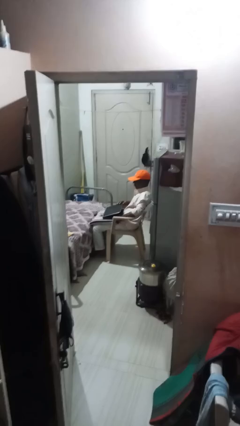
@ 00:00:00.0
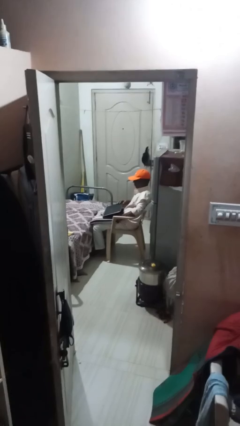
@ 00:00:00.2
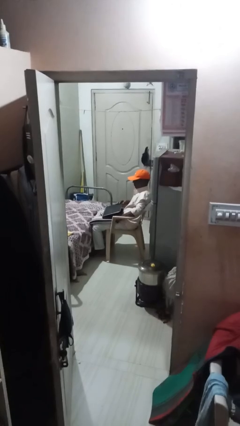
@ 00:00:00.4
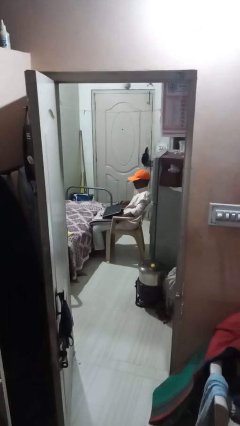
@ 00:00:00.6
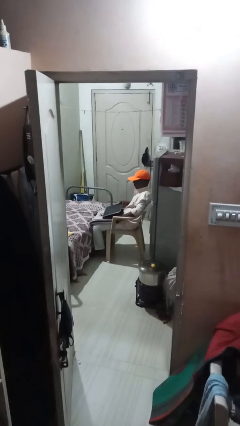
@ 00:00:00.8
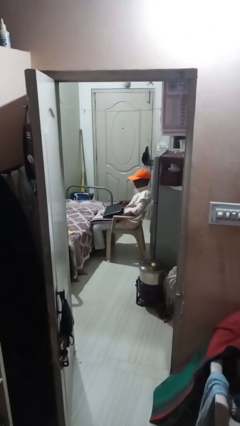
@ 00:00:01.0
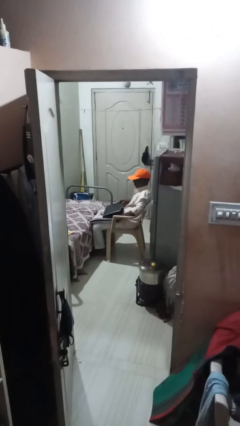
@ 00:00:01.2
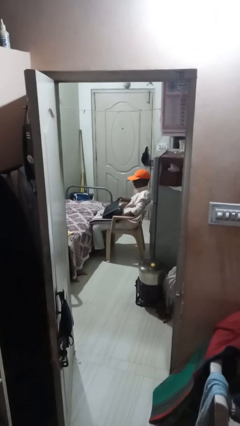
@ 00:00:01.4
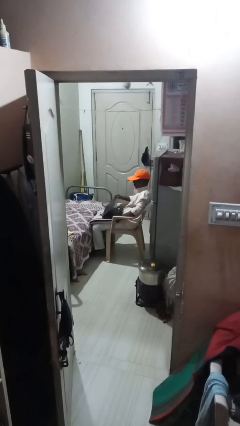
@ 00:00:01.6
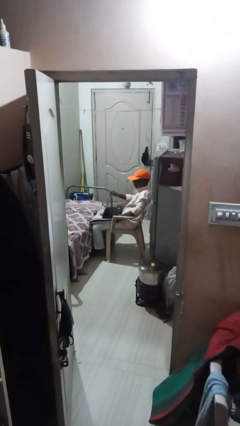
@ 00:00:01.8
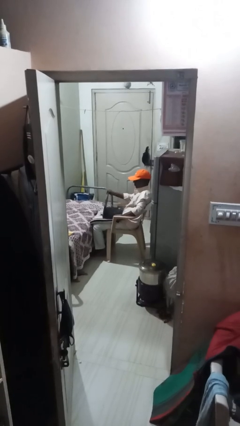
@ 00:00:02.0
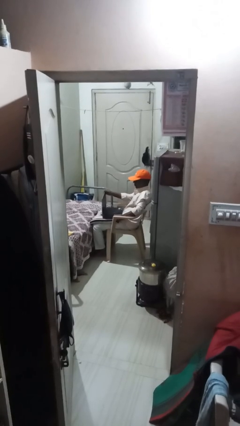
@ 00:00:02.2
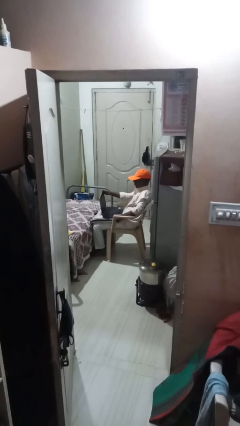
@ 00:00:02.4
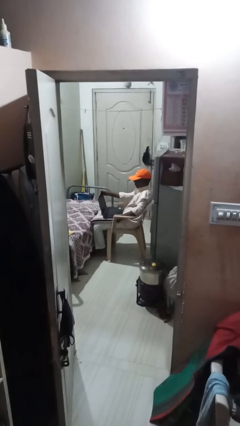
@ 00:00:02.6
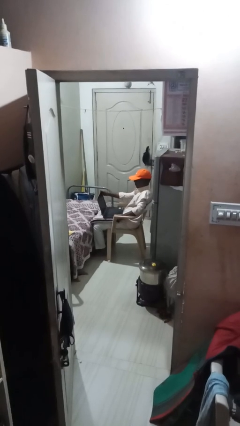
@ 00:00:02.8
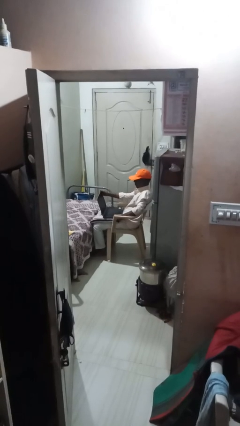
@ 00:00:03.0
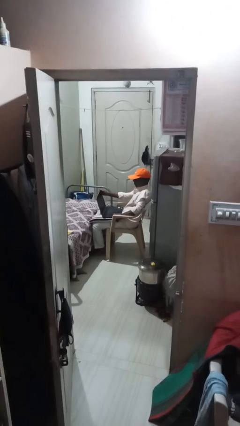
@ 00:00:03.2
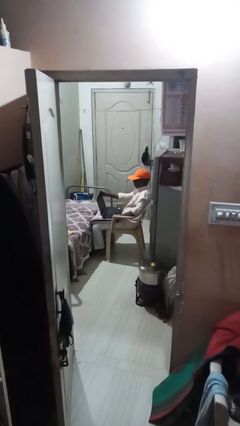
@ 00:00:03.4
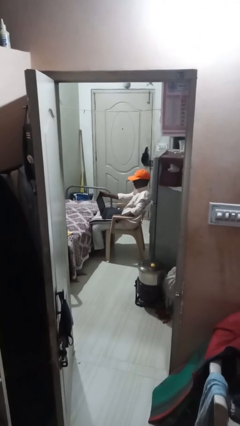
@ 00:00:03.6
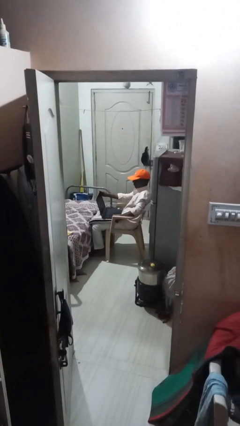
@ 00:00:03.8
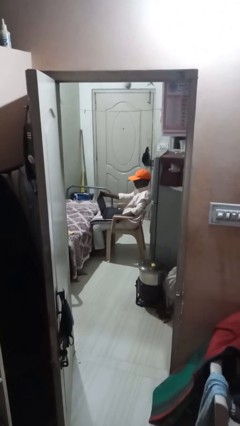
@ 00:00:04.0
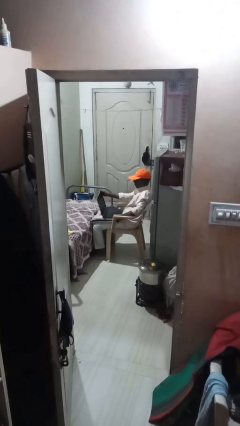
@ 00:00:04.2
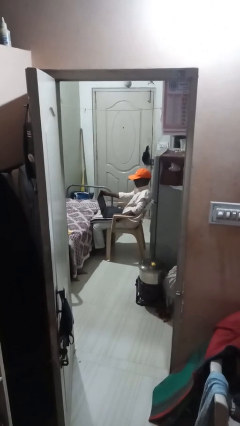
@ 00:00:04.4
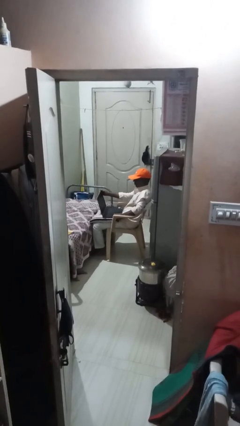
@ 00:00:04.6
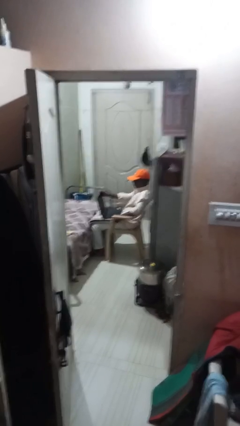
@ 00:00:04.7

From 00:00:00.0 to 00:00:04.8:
person interacts with laptop

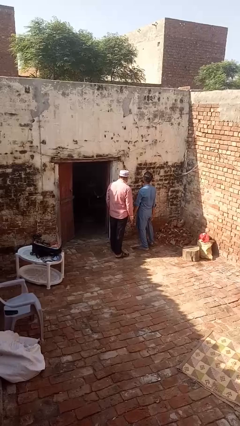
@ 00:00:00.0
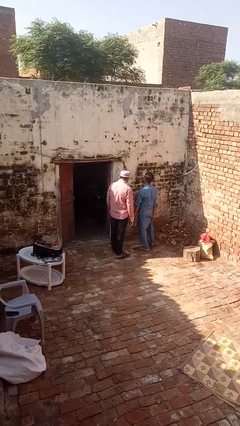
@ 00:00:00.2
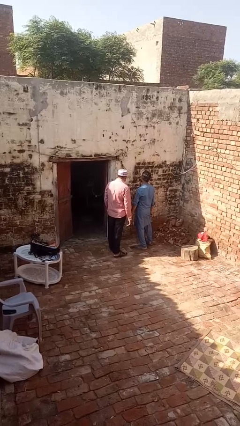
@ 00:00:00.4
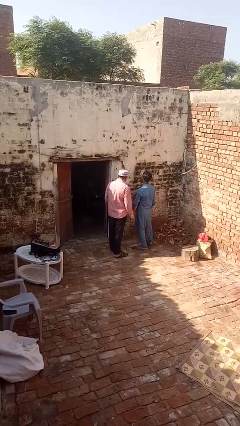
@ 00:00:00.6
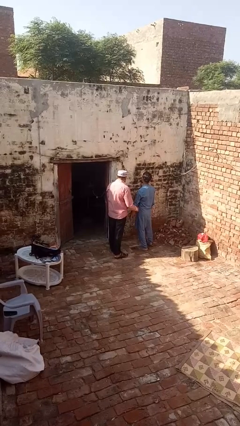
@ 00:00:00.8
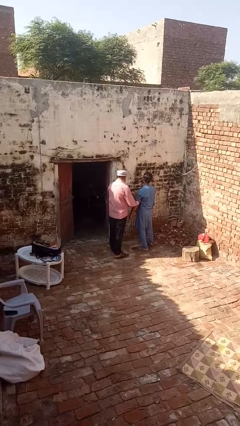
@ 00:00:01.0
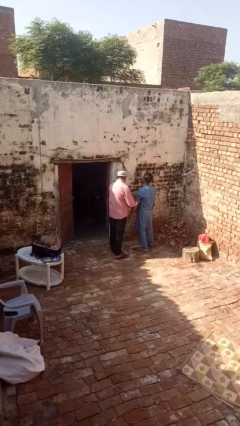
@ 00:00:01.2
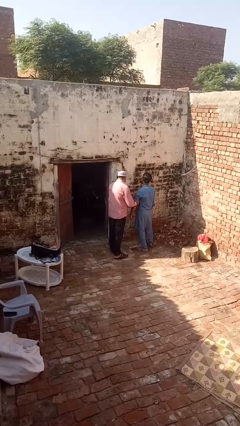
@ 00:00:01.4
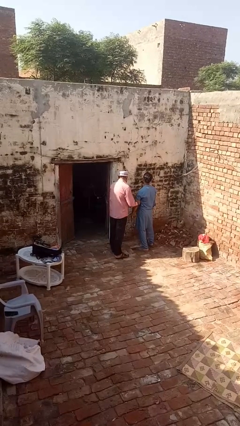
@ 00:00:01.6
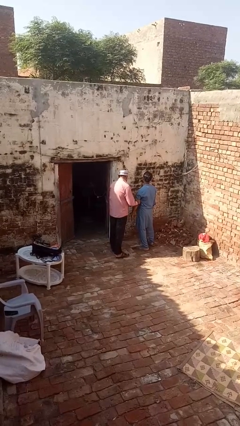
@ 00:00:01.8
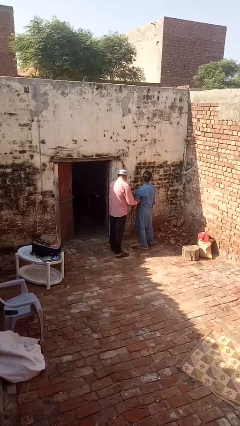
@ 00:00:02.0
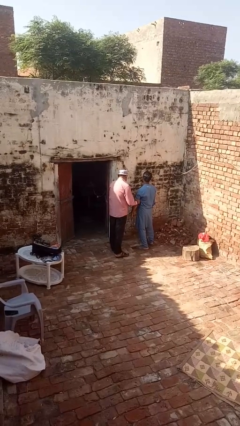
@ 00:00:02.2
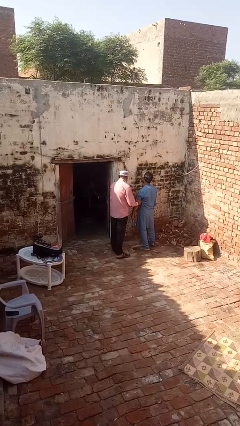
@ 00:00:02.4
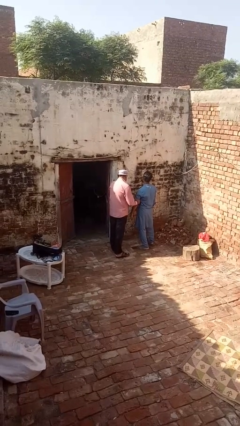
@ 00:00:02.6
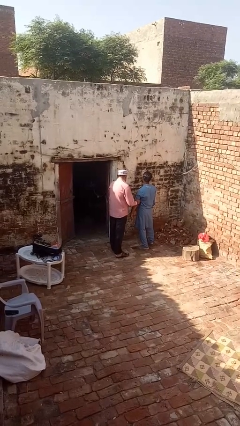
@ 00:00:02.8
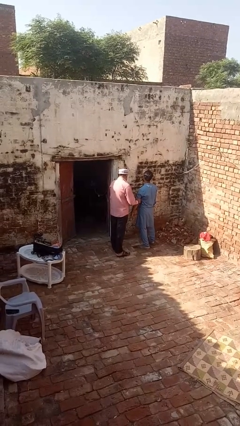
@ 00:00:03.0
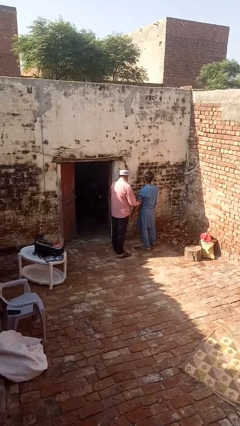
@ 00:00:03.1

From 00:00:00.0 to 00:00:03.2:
person grabs person by bicep

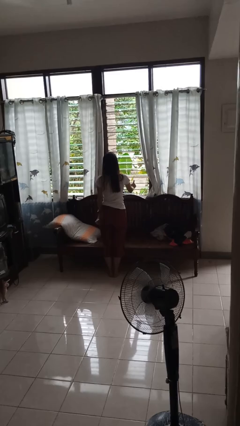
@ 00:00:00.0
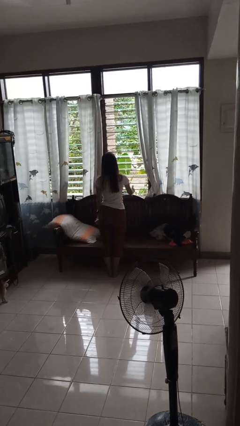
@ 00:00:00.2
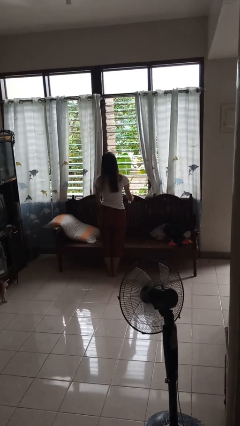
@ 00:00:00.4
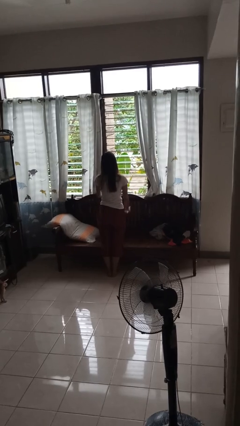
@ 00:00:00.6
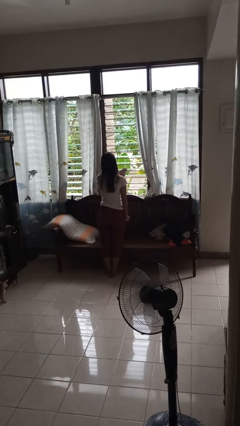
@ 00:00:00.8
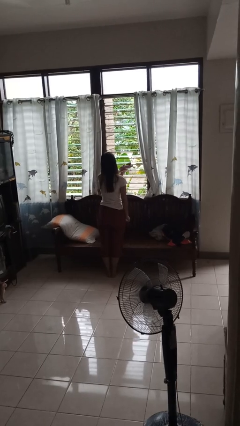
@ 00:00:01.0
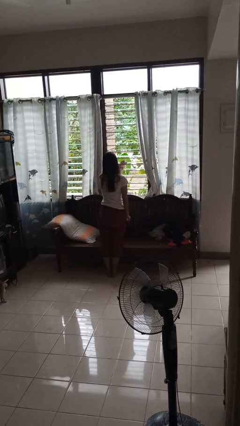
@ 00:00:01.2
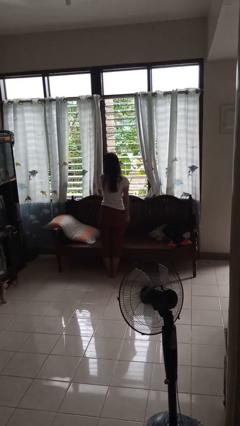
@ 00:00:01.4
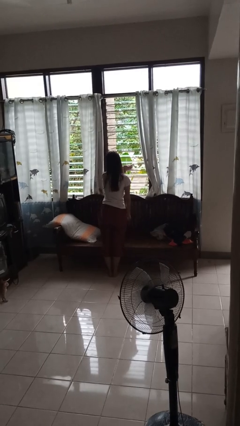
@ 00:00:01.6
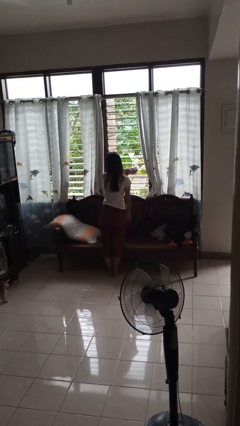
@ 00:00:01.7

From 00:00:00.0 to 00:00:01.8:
person washes window

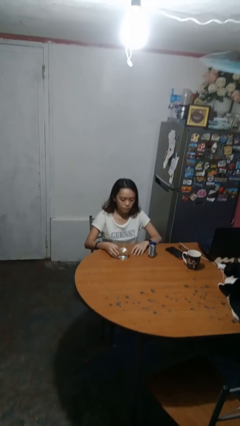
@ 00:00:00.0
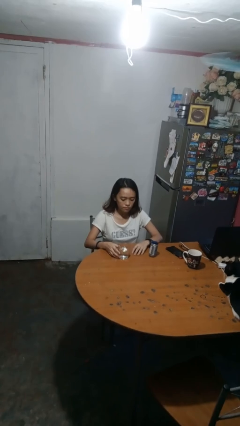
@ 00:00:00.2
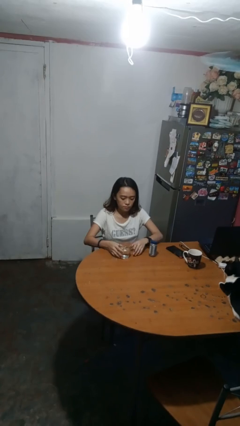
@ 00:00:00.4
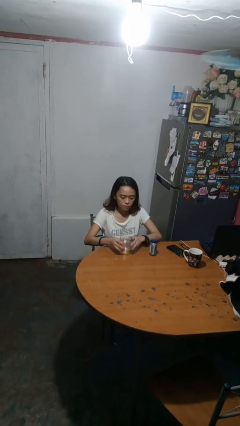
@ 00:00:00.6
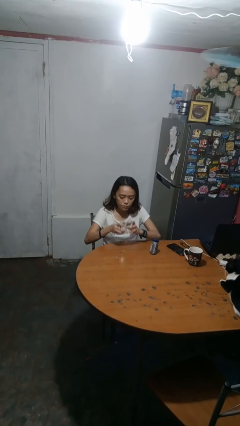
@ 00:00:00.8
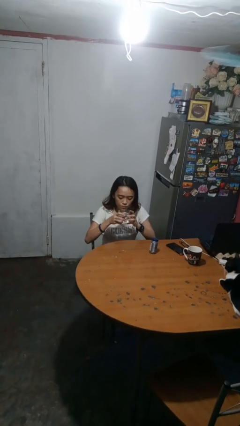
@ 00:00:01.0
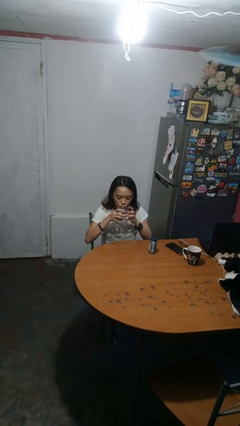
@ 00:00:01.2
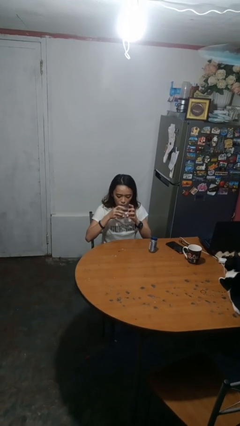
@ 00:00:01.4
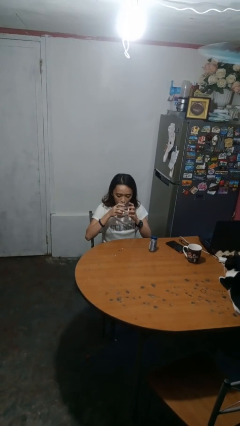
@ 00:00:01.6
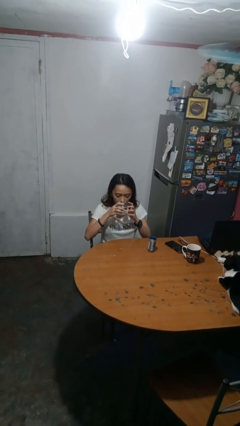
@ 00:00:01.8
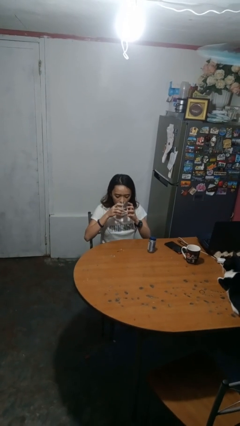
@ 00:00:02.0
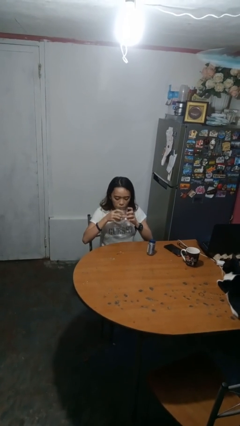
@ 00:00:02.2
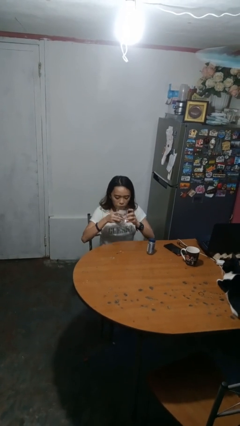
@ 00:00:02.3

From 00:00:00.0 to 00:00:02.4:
person drinks from cup

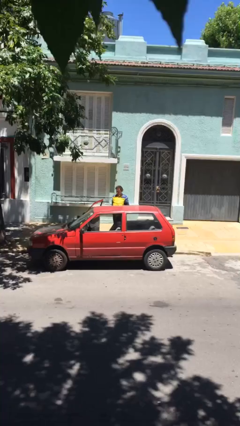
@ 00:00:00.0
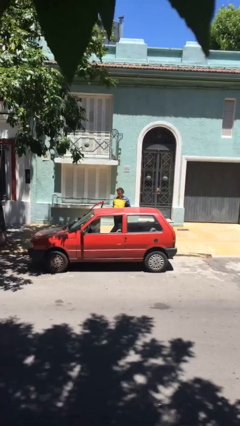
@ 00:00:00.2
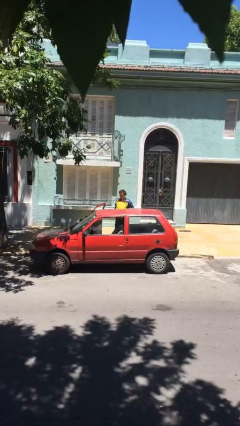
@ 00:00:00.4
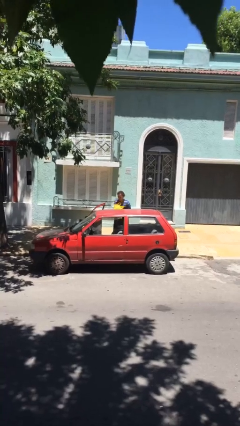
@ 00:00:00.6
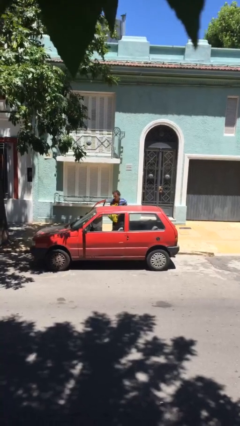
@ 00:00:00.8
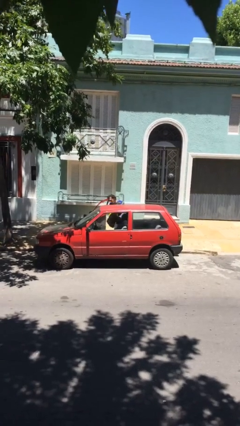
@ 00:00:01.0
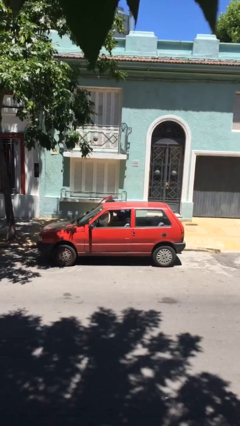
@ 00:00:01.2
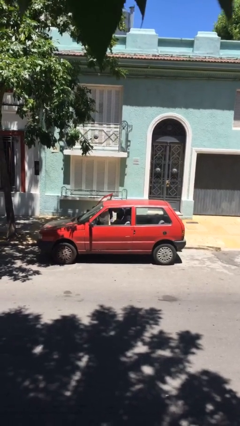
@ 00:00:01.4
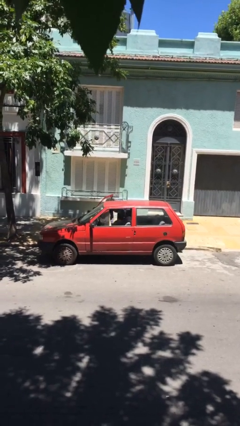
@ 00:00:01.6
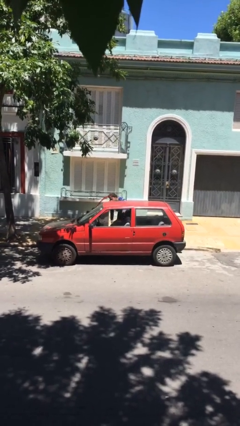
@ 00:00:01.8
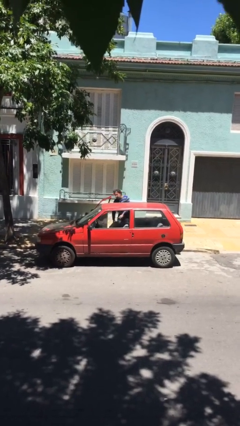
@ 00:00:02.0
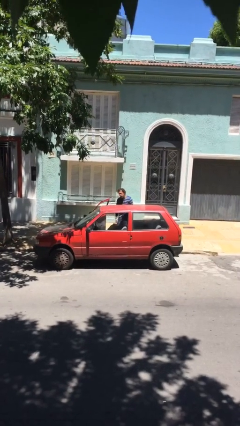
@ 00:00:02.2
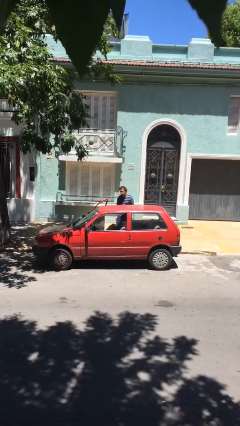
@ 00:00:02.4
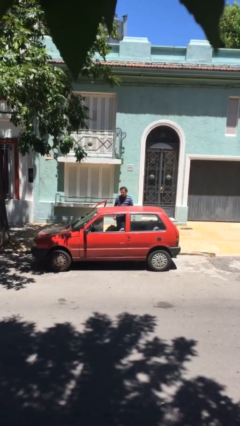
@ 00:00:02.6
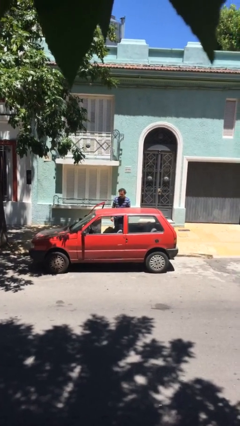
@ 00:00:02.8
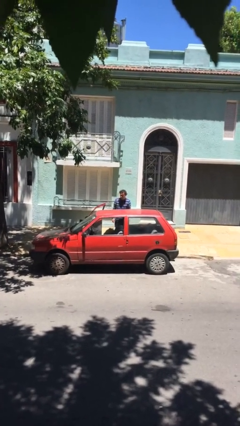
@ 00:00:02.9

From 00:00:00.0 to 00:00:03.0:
person loads car

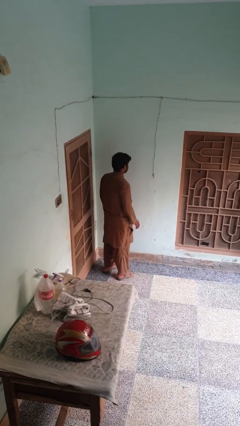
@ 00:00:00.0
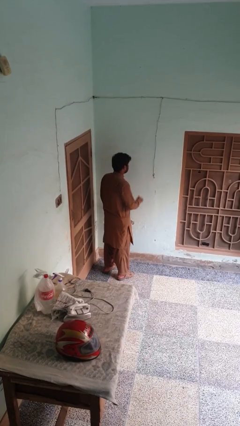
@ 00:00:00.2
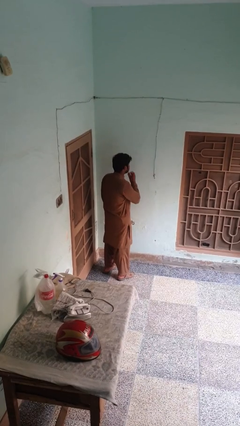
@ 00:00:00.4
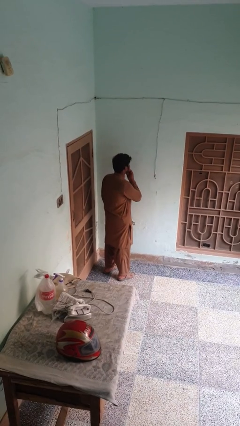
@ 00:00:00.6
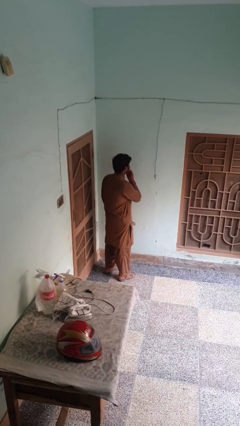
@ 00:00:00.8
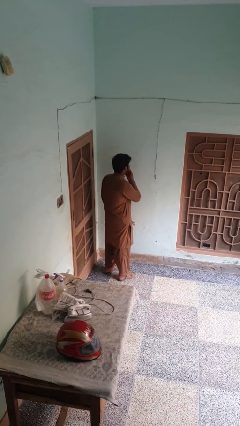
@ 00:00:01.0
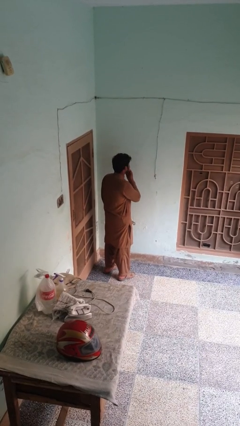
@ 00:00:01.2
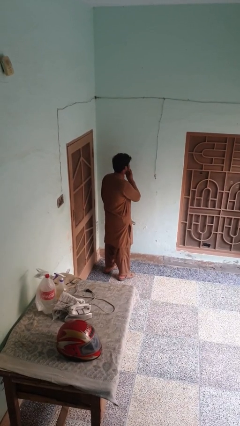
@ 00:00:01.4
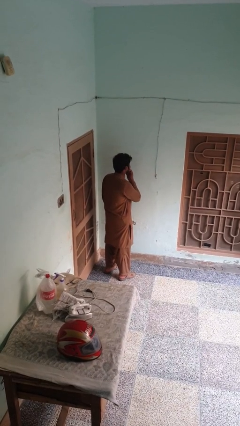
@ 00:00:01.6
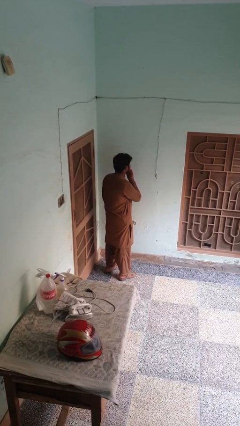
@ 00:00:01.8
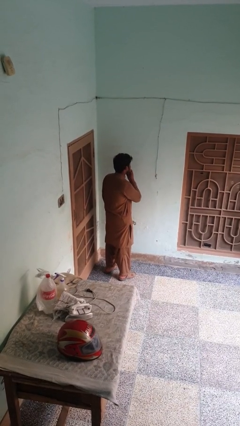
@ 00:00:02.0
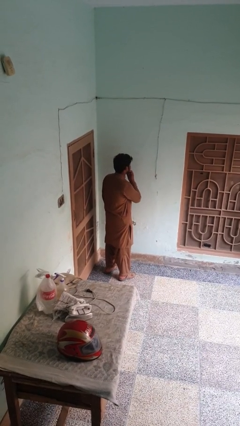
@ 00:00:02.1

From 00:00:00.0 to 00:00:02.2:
person strokes chin
